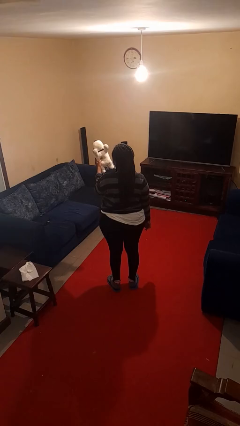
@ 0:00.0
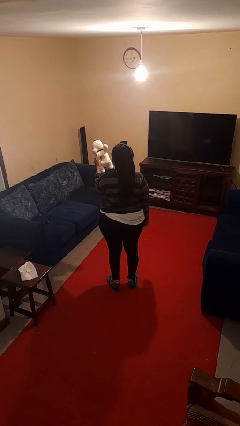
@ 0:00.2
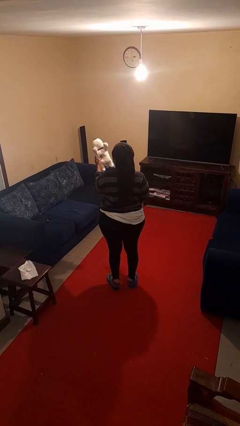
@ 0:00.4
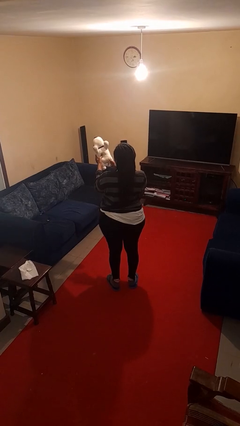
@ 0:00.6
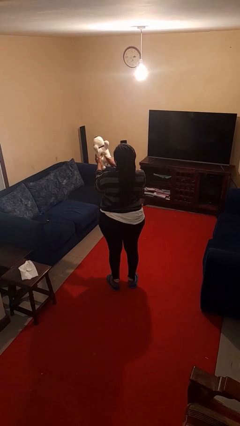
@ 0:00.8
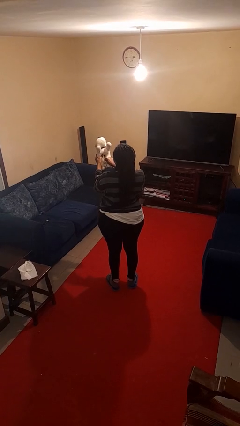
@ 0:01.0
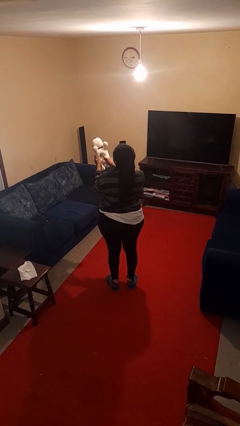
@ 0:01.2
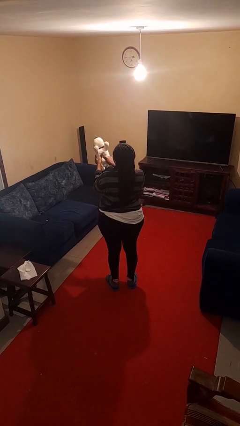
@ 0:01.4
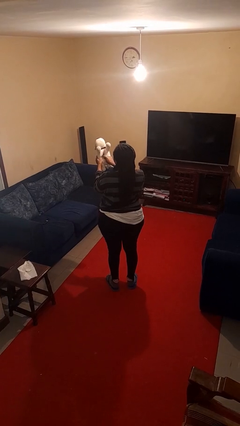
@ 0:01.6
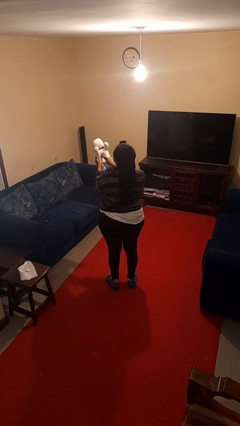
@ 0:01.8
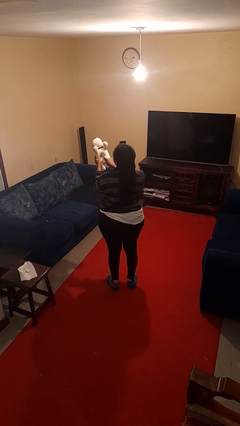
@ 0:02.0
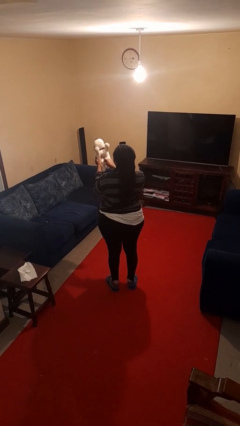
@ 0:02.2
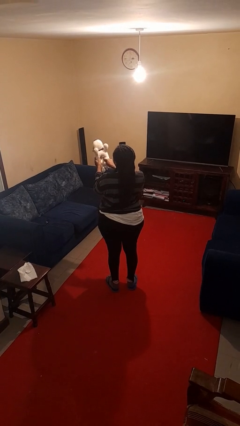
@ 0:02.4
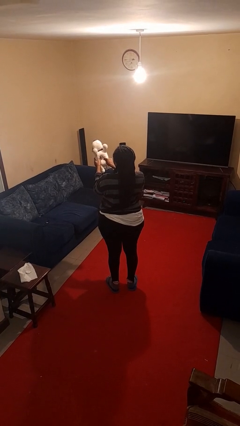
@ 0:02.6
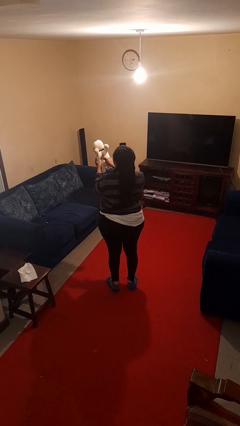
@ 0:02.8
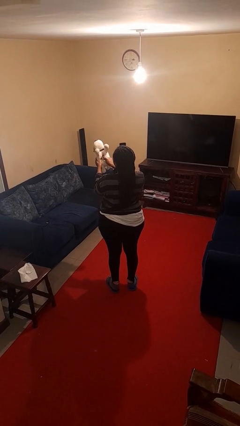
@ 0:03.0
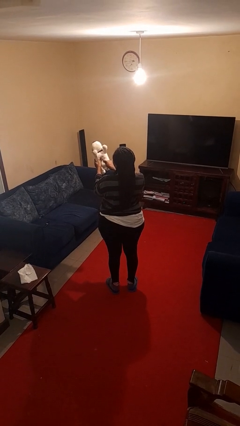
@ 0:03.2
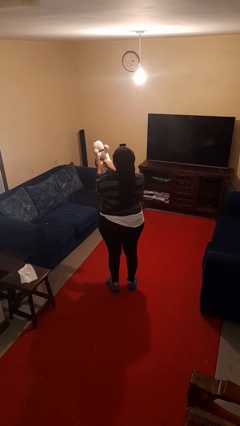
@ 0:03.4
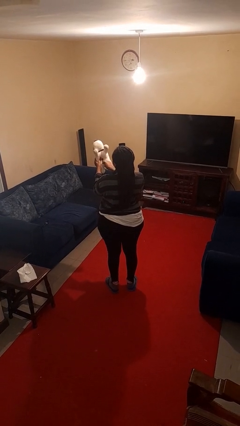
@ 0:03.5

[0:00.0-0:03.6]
person taps object with finger

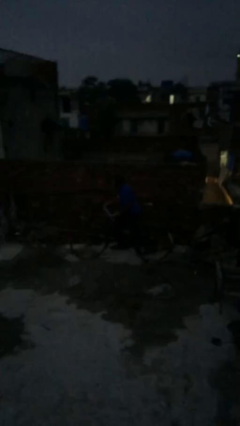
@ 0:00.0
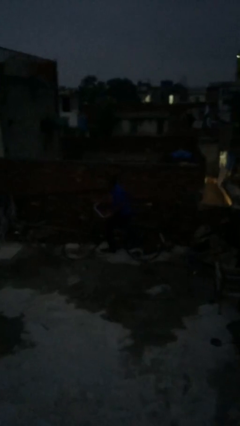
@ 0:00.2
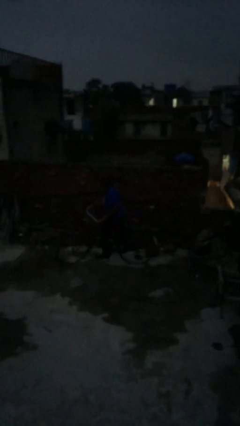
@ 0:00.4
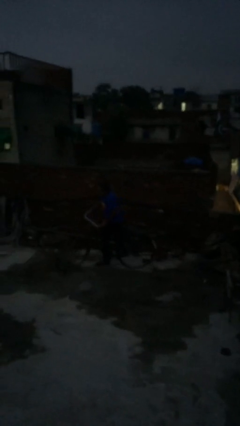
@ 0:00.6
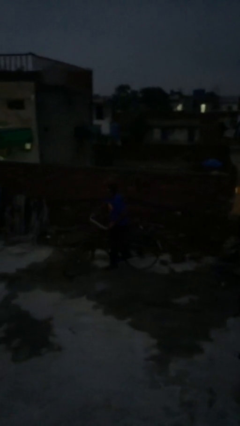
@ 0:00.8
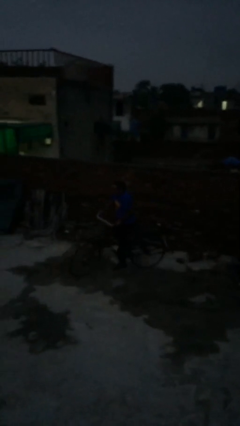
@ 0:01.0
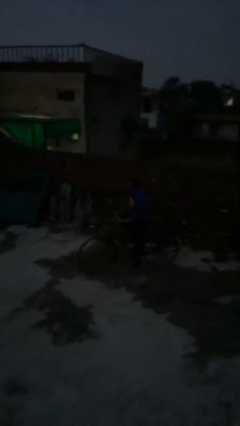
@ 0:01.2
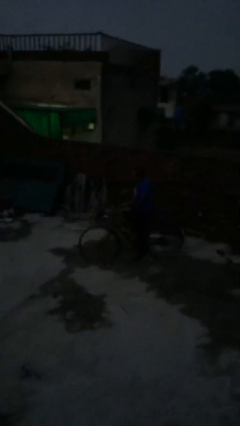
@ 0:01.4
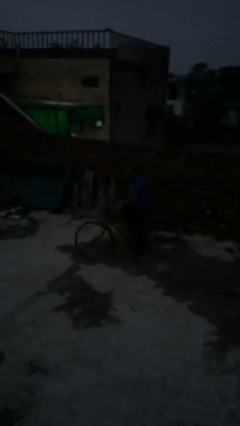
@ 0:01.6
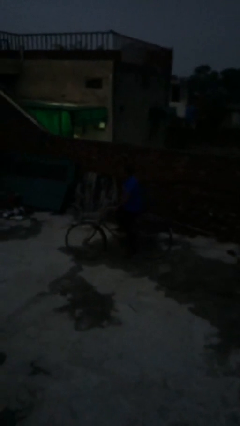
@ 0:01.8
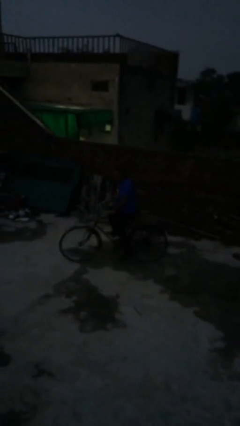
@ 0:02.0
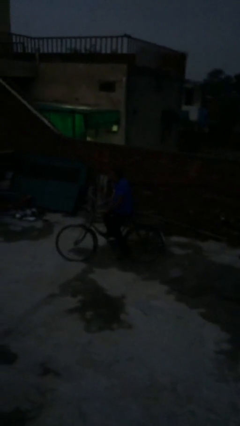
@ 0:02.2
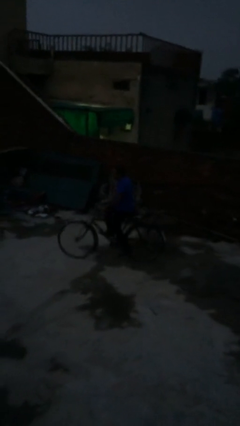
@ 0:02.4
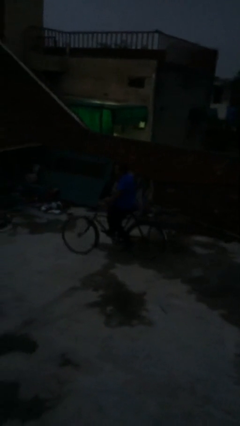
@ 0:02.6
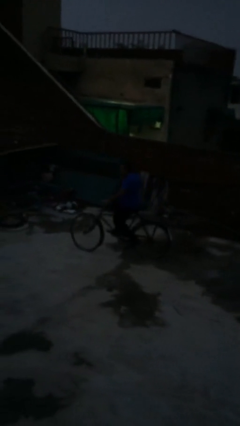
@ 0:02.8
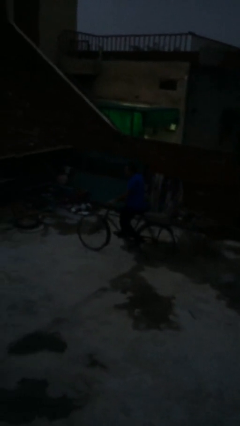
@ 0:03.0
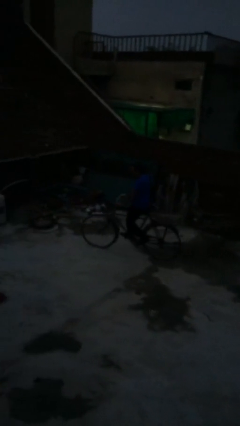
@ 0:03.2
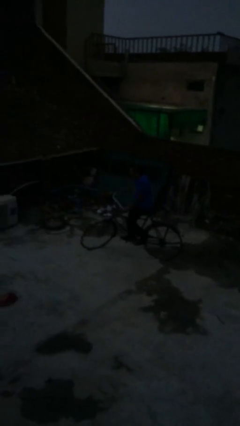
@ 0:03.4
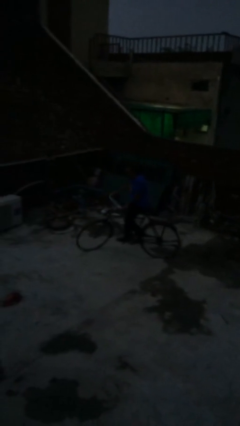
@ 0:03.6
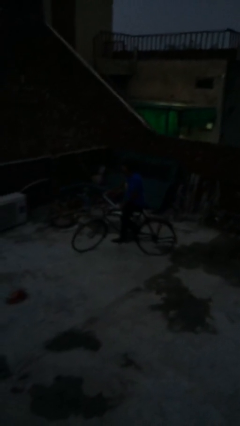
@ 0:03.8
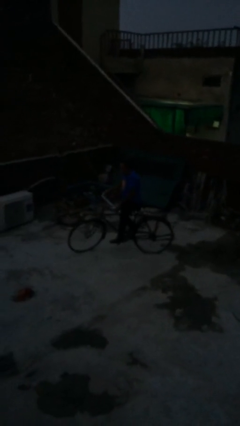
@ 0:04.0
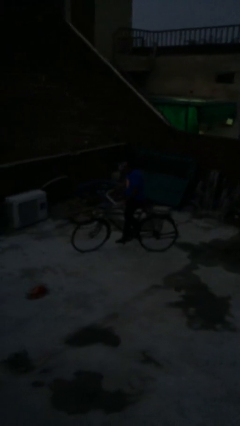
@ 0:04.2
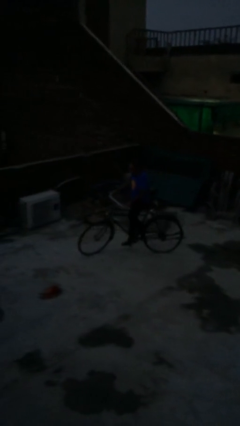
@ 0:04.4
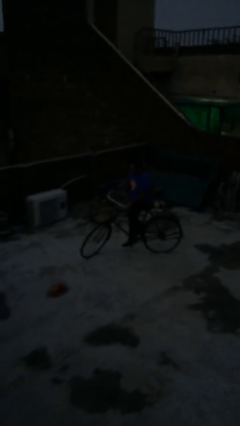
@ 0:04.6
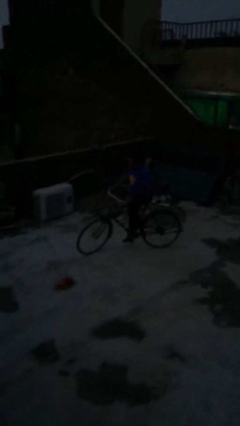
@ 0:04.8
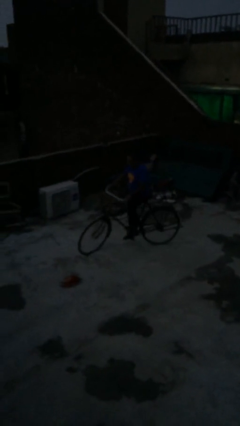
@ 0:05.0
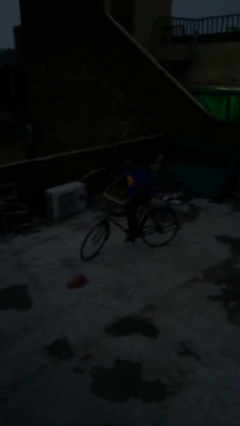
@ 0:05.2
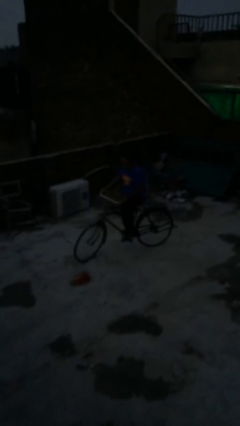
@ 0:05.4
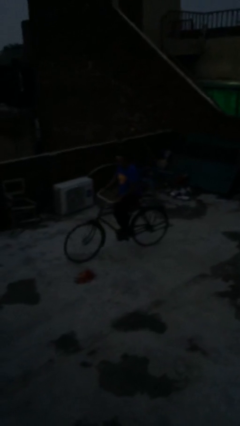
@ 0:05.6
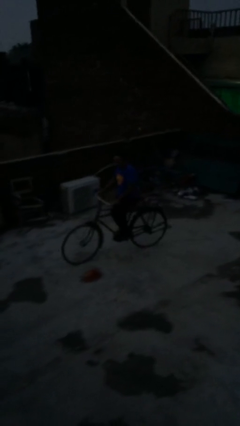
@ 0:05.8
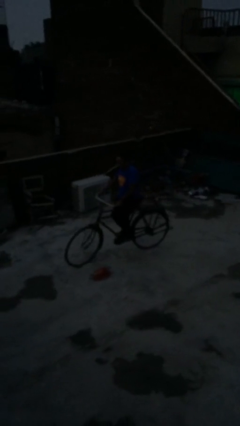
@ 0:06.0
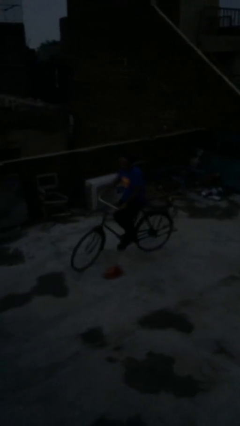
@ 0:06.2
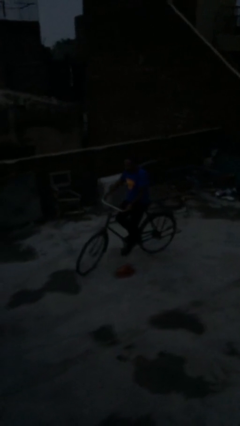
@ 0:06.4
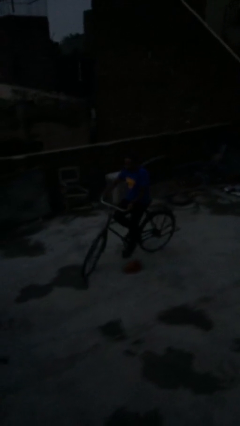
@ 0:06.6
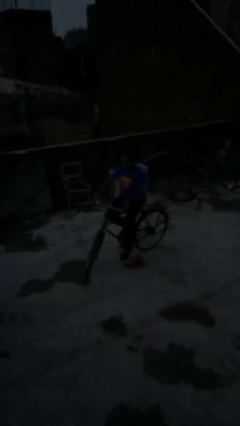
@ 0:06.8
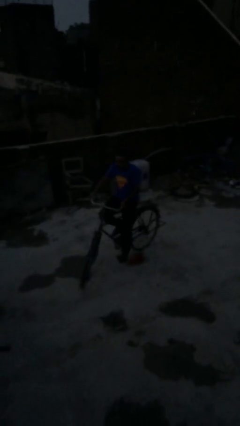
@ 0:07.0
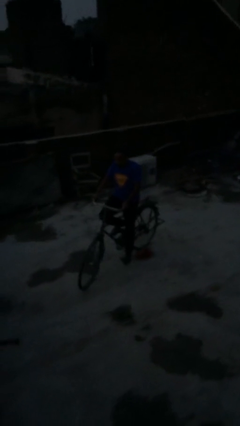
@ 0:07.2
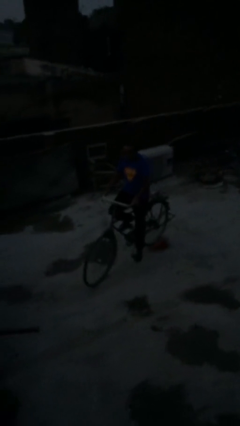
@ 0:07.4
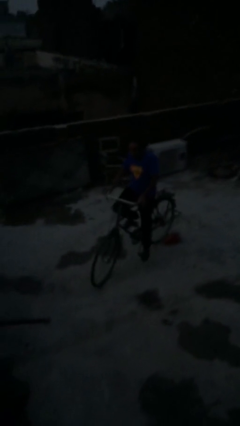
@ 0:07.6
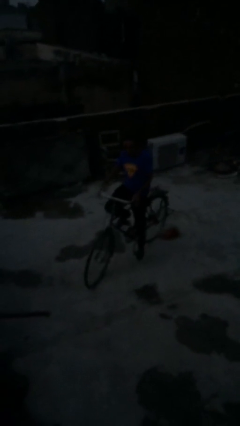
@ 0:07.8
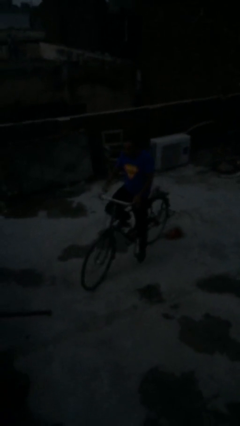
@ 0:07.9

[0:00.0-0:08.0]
person rides bicycle

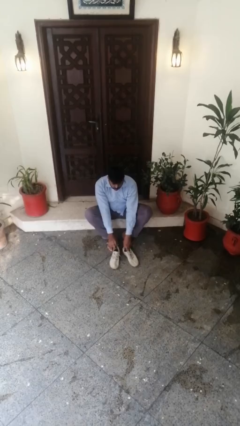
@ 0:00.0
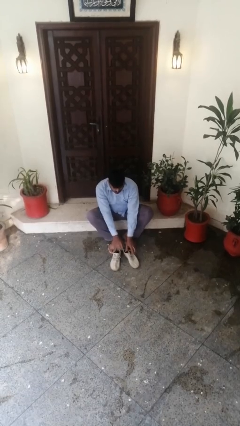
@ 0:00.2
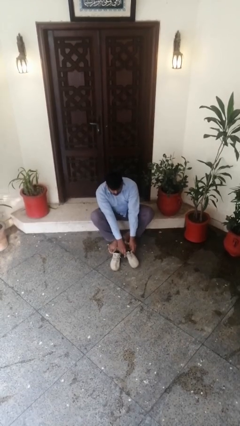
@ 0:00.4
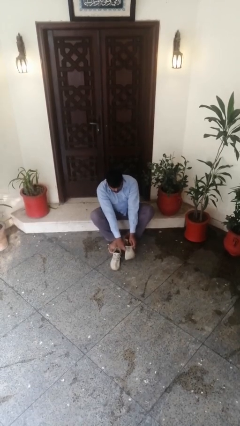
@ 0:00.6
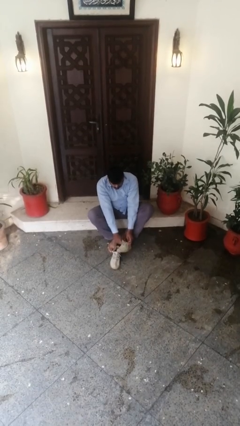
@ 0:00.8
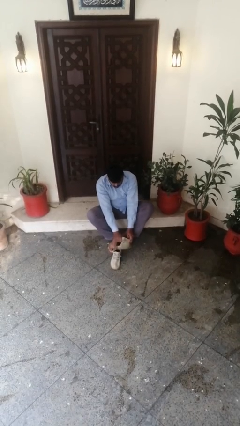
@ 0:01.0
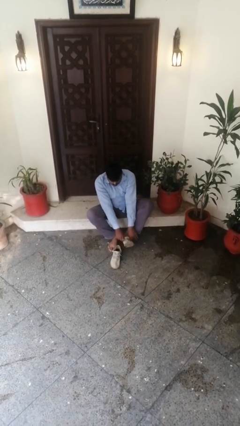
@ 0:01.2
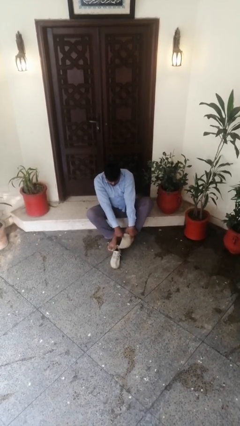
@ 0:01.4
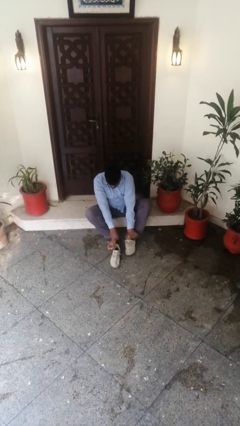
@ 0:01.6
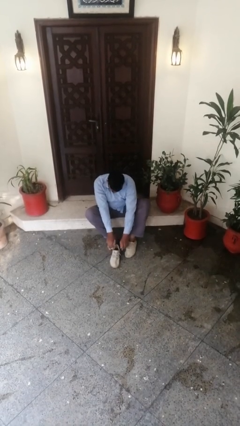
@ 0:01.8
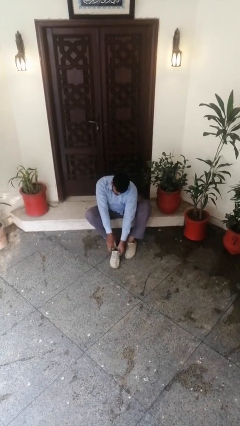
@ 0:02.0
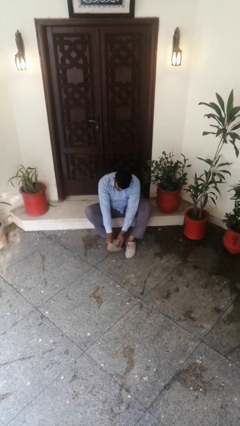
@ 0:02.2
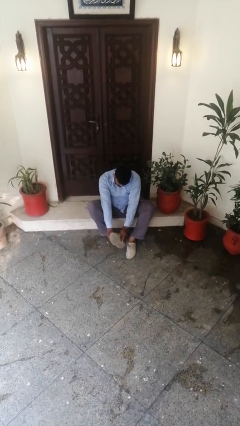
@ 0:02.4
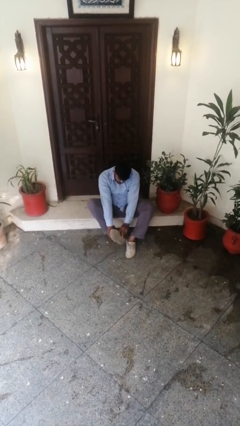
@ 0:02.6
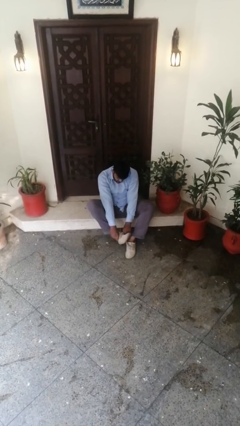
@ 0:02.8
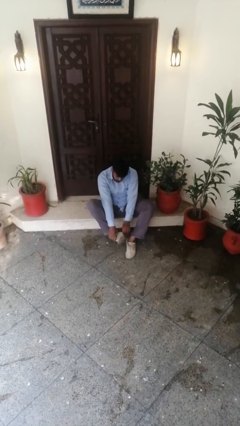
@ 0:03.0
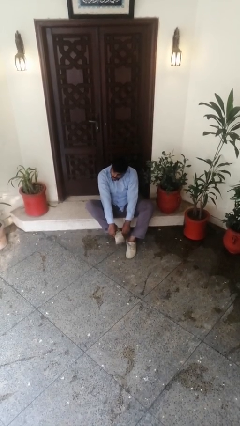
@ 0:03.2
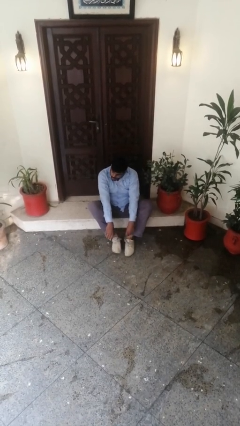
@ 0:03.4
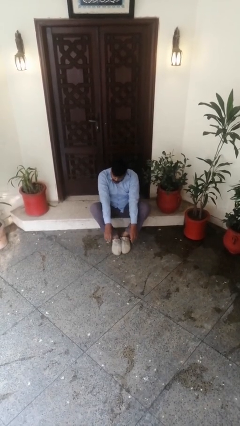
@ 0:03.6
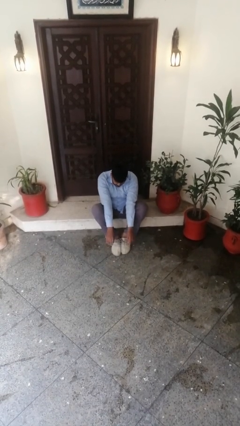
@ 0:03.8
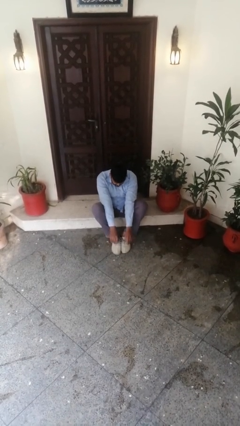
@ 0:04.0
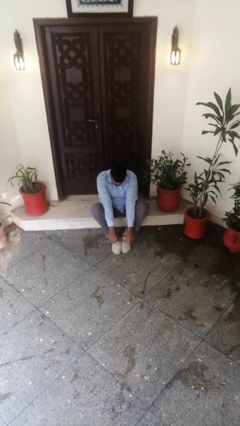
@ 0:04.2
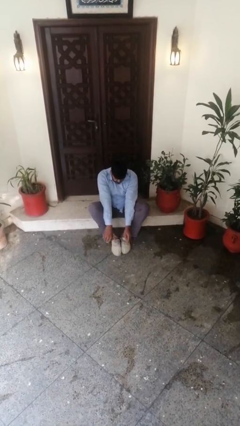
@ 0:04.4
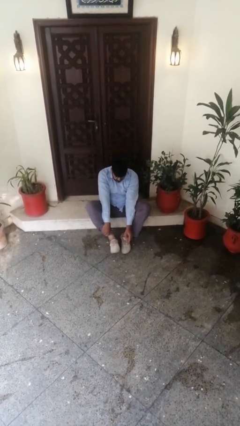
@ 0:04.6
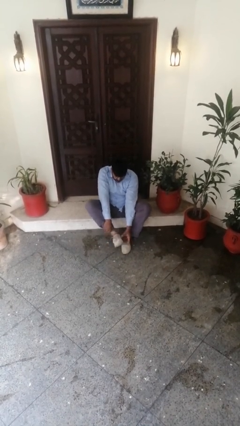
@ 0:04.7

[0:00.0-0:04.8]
person puts on shoes

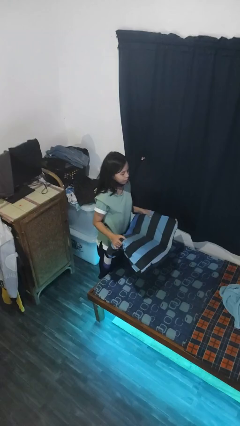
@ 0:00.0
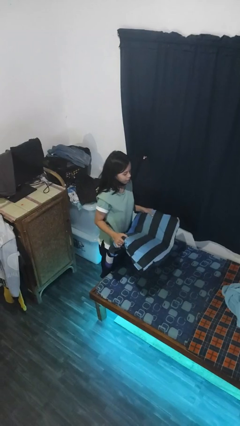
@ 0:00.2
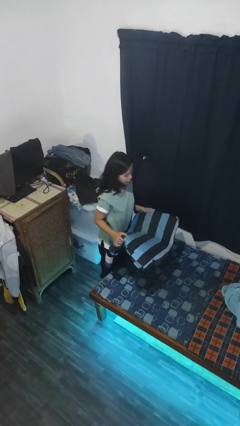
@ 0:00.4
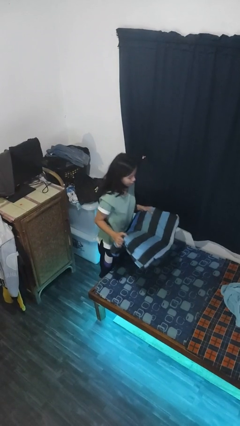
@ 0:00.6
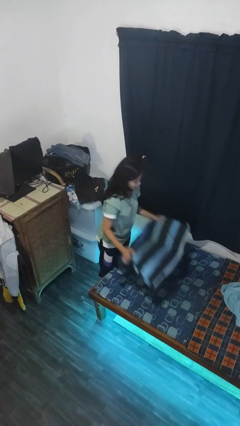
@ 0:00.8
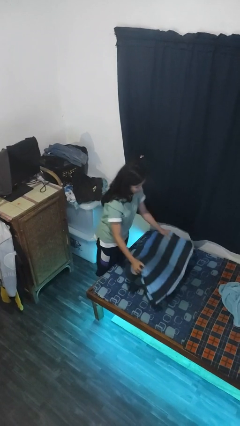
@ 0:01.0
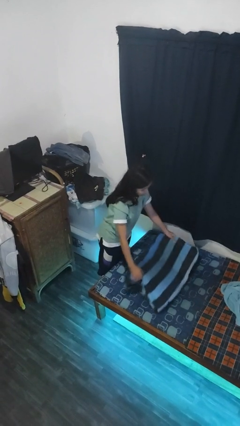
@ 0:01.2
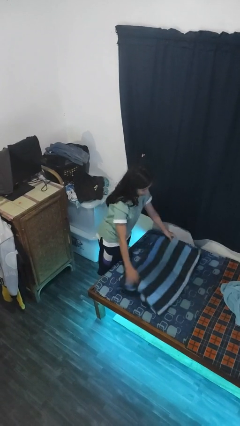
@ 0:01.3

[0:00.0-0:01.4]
person puts down object on bed
